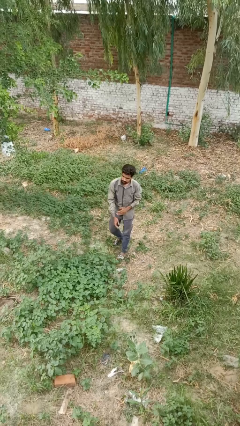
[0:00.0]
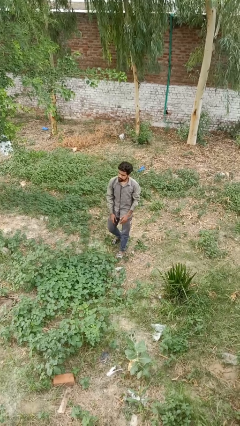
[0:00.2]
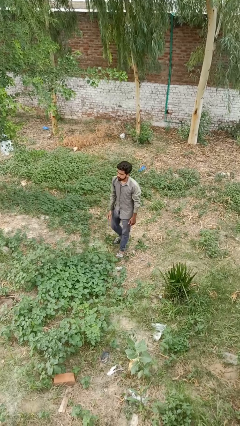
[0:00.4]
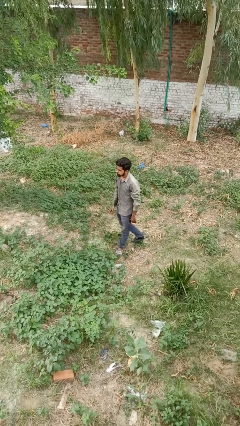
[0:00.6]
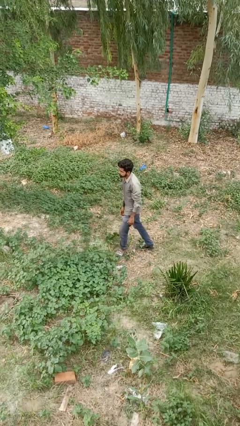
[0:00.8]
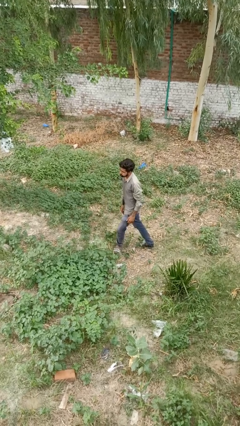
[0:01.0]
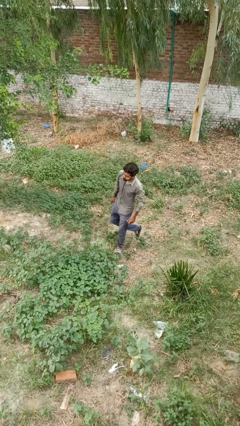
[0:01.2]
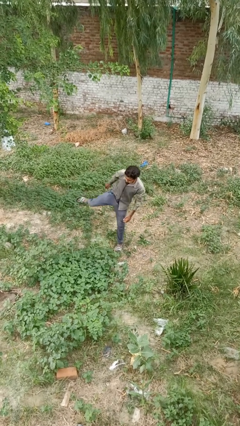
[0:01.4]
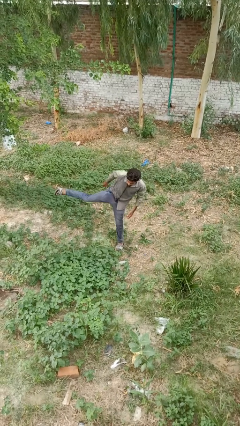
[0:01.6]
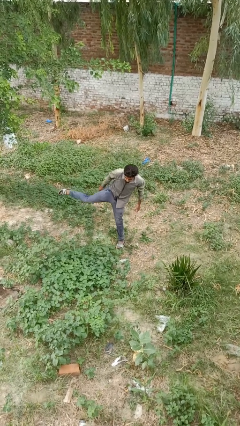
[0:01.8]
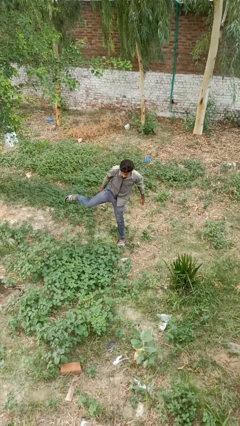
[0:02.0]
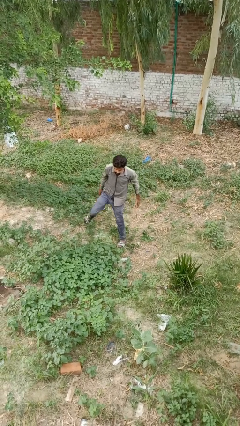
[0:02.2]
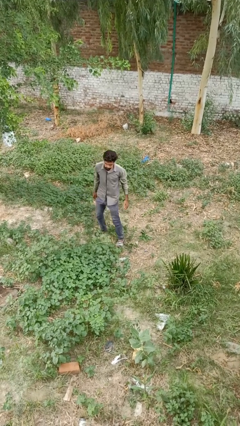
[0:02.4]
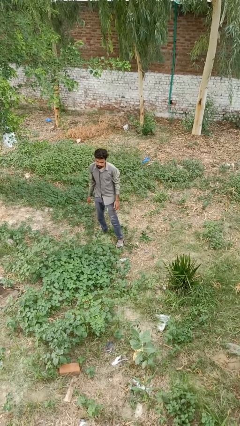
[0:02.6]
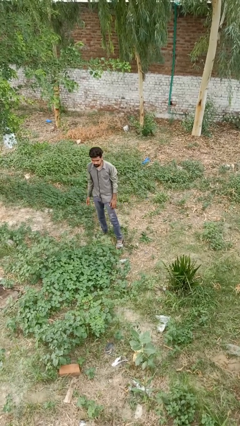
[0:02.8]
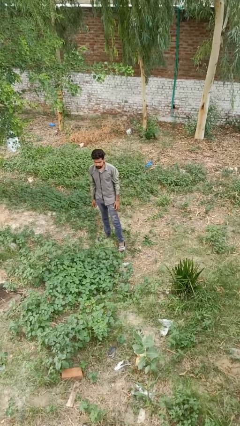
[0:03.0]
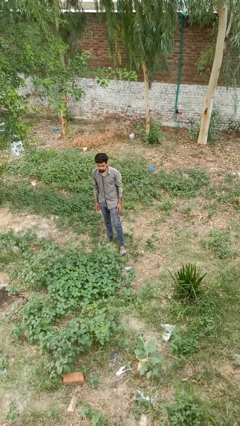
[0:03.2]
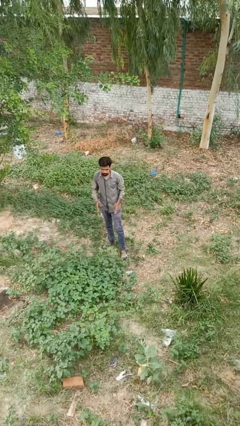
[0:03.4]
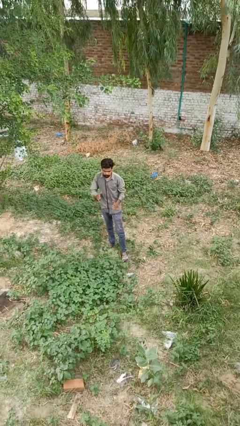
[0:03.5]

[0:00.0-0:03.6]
person karate kicks

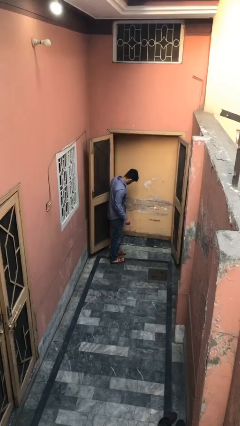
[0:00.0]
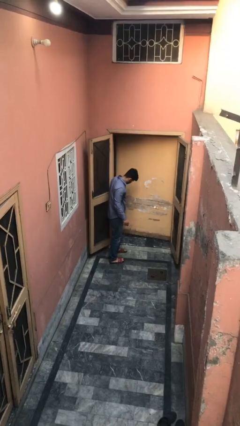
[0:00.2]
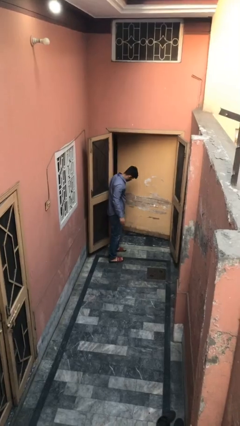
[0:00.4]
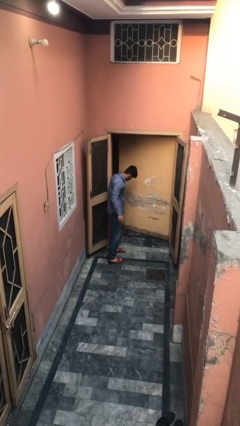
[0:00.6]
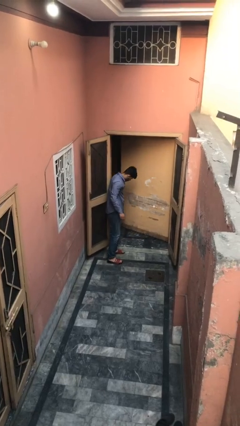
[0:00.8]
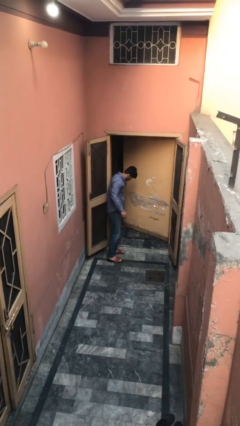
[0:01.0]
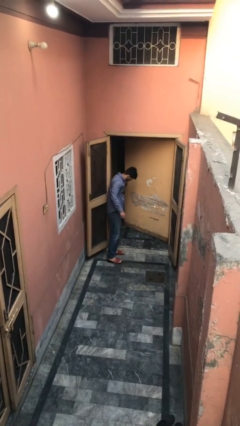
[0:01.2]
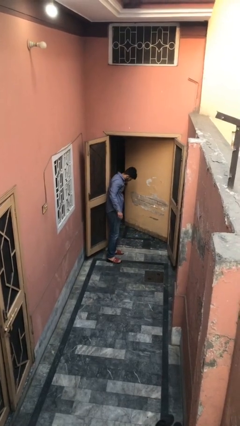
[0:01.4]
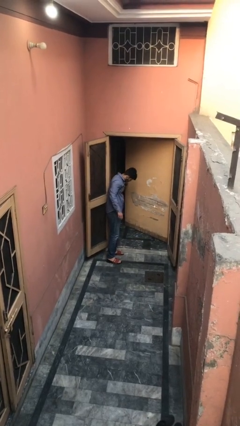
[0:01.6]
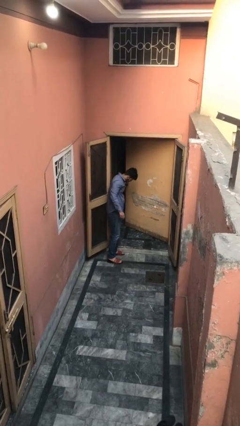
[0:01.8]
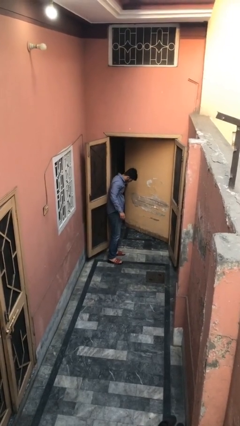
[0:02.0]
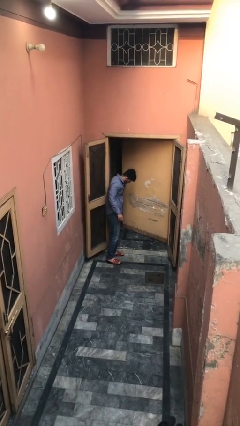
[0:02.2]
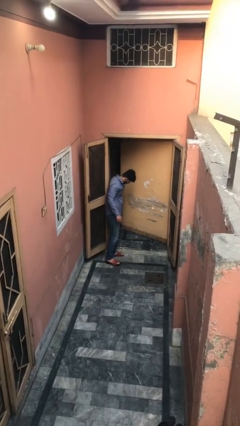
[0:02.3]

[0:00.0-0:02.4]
person opens facility door

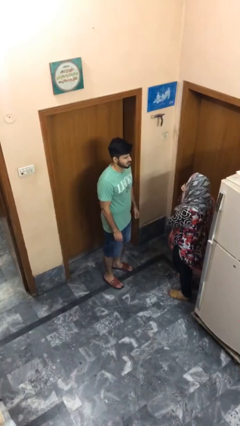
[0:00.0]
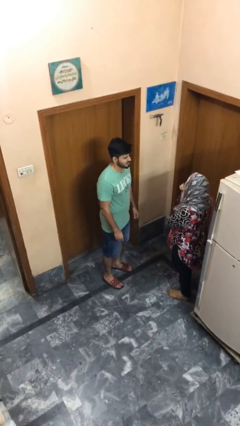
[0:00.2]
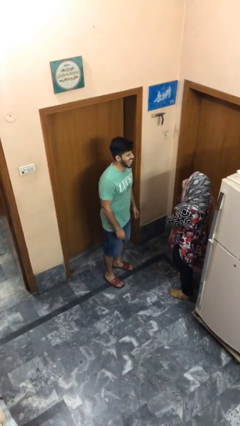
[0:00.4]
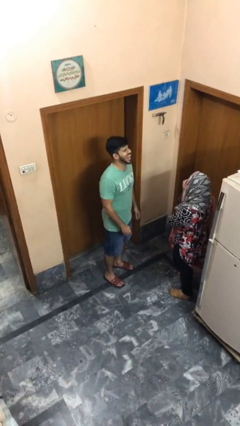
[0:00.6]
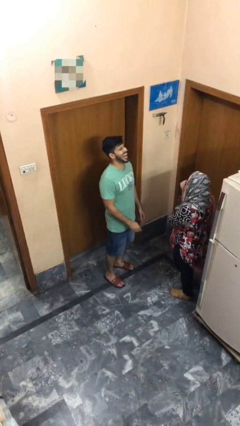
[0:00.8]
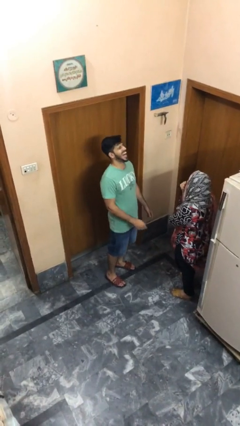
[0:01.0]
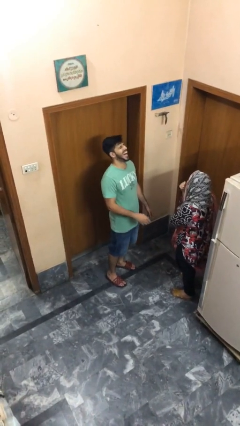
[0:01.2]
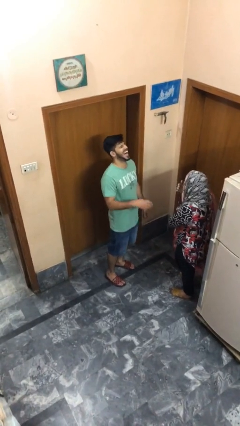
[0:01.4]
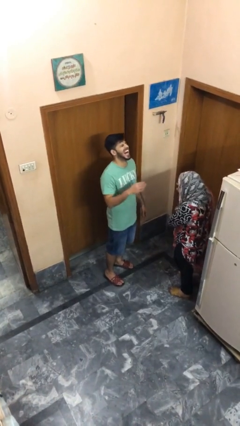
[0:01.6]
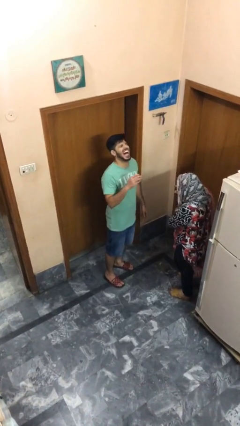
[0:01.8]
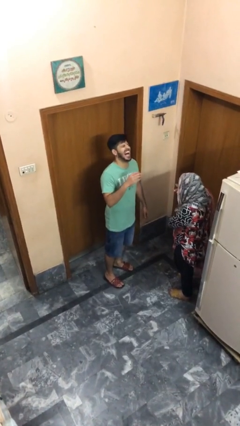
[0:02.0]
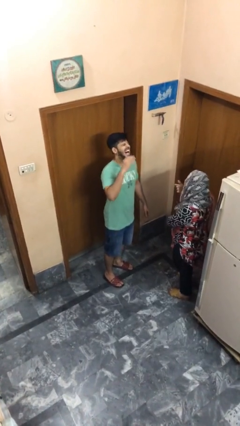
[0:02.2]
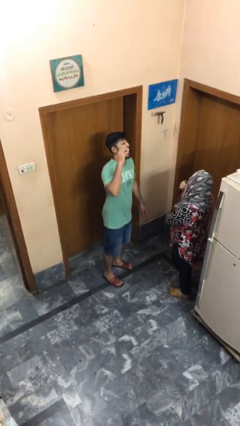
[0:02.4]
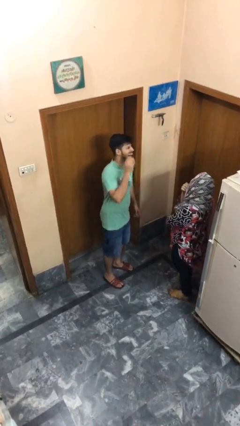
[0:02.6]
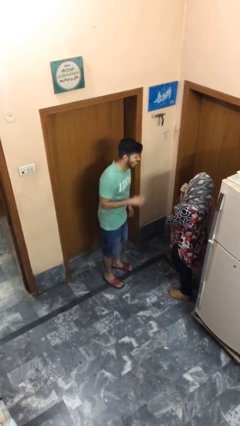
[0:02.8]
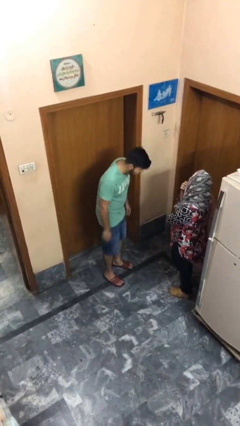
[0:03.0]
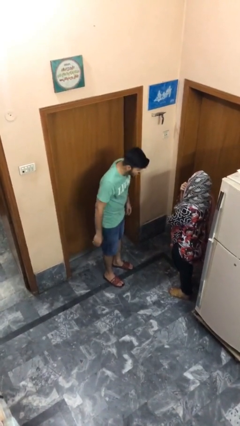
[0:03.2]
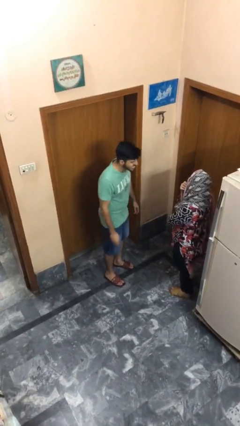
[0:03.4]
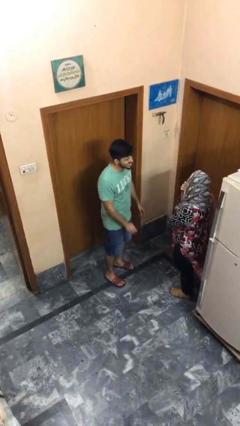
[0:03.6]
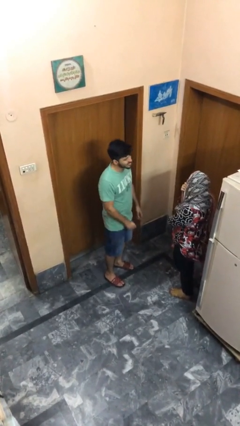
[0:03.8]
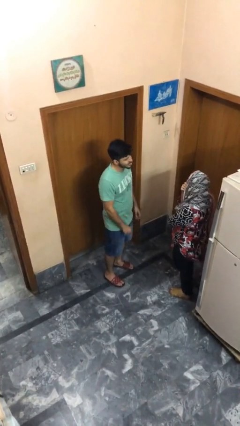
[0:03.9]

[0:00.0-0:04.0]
person laughs with person

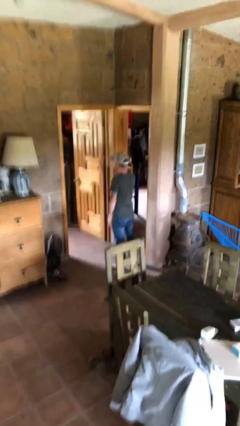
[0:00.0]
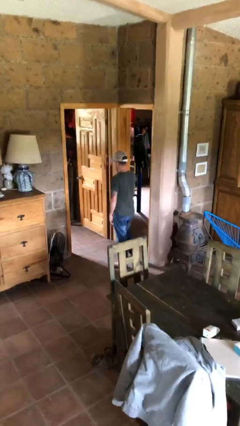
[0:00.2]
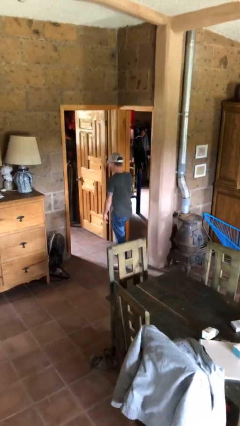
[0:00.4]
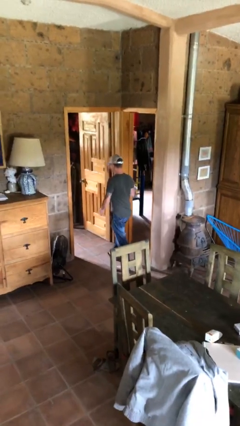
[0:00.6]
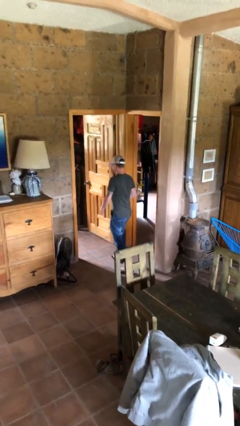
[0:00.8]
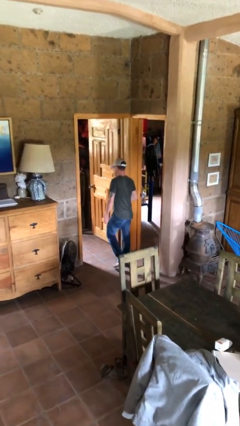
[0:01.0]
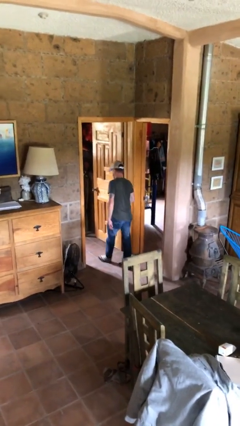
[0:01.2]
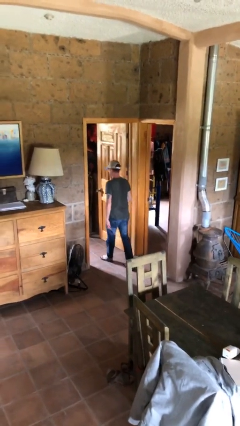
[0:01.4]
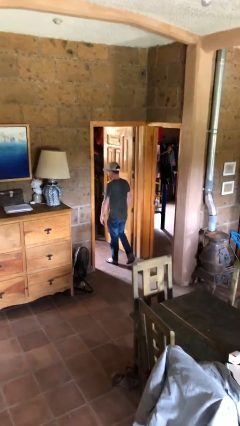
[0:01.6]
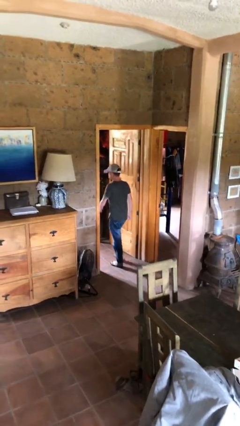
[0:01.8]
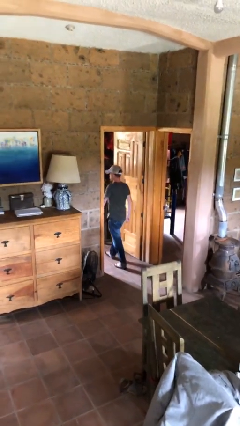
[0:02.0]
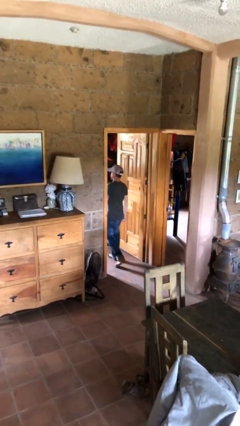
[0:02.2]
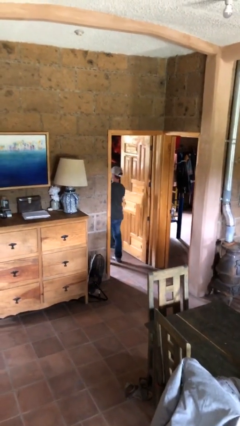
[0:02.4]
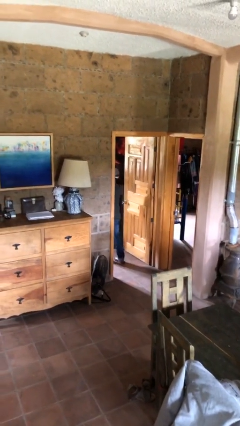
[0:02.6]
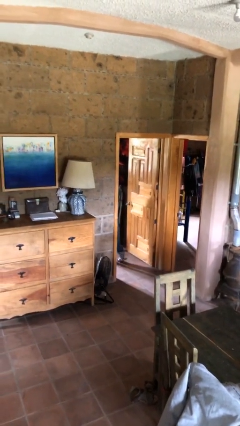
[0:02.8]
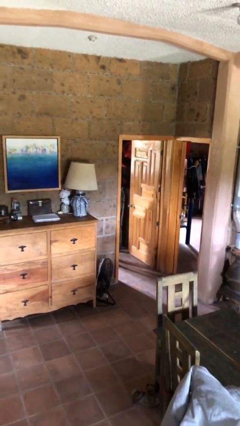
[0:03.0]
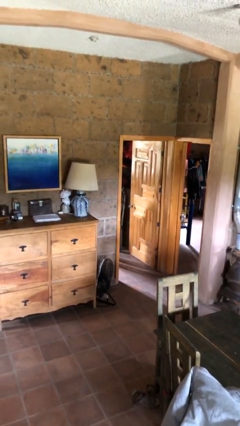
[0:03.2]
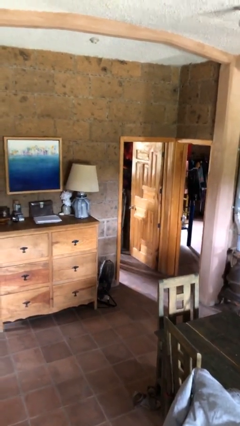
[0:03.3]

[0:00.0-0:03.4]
person exits scene through structure

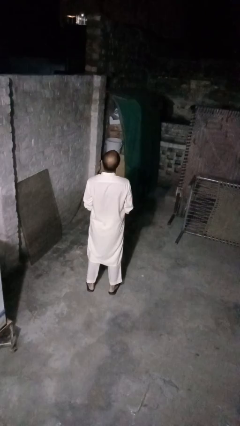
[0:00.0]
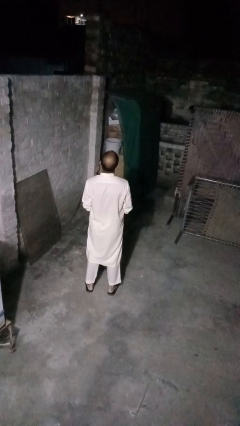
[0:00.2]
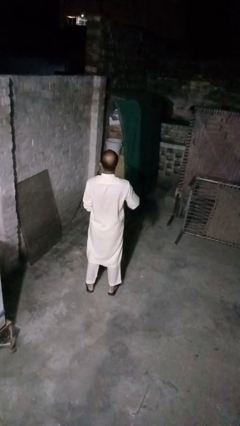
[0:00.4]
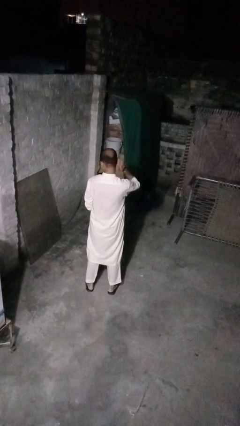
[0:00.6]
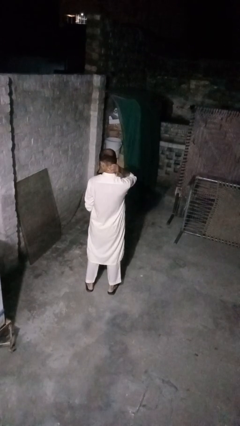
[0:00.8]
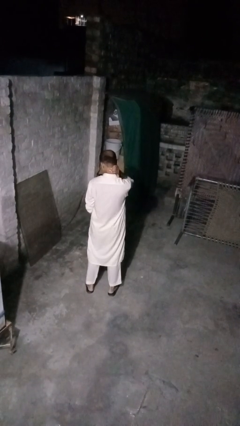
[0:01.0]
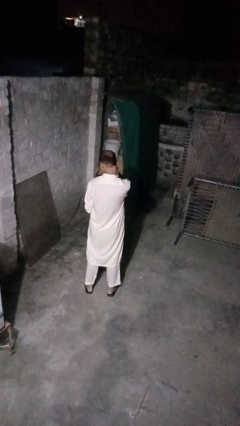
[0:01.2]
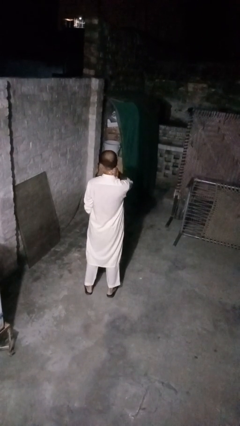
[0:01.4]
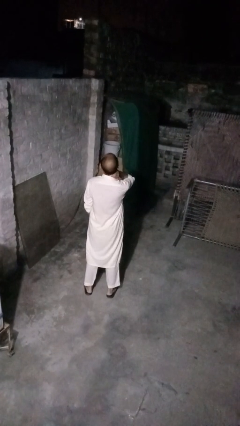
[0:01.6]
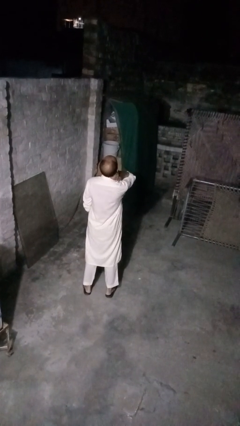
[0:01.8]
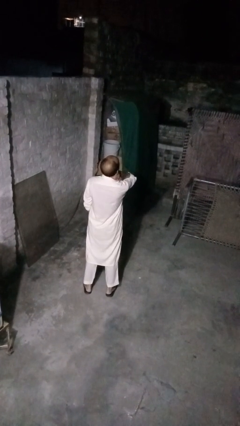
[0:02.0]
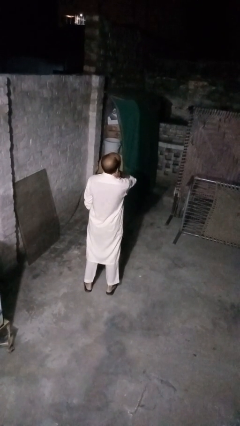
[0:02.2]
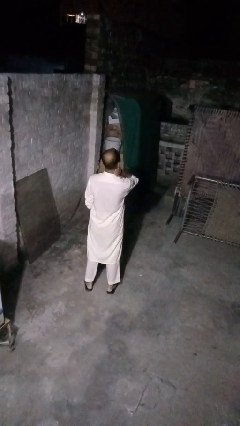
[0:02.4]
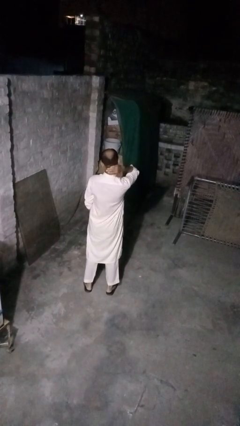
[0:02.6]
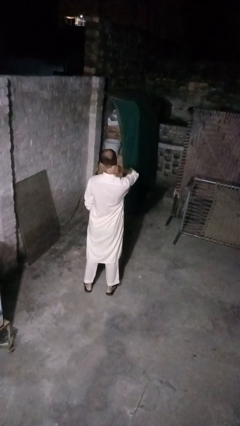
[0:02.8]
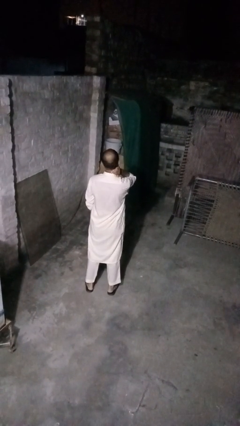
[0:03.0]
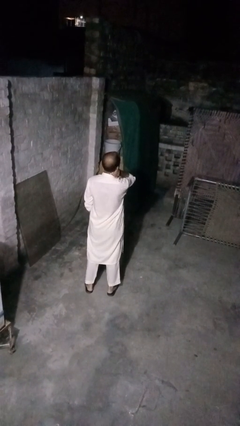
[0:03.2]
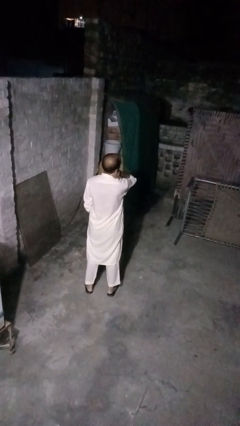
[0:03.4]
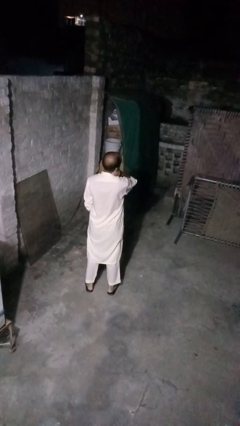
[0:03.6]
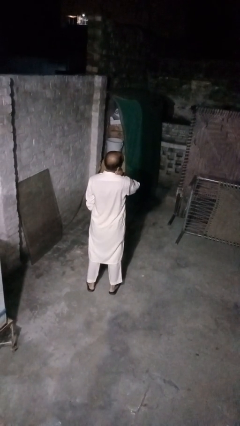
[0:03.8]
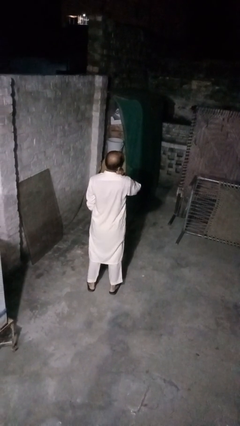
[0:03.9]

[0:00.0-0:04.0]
person rubs neck

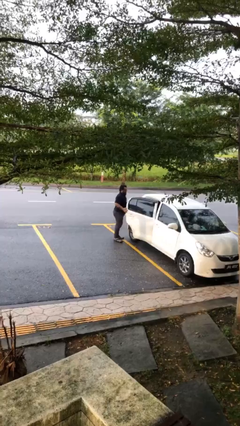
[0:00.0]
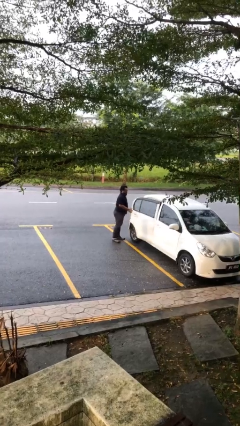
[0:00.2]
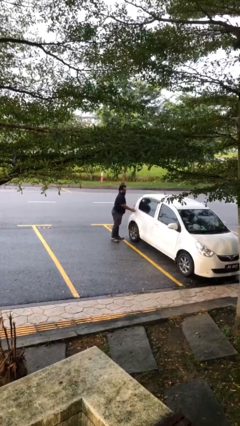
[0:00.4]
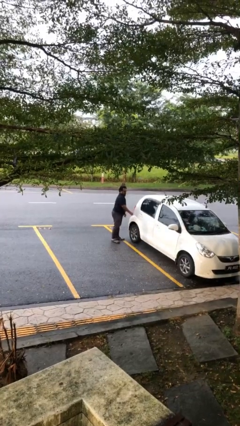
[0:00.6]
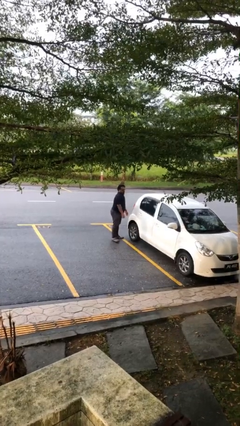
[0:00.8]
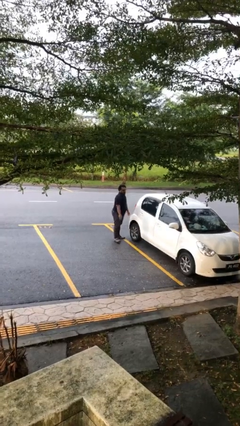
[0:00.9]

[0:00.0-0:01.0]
person closes car door
